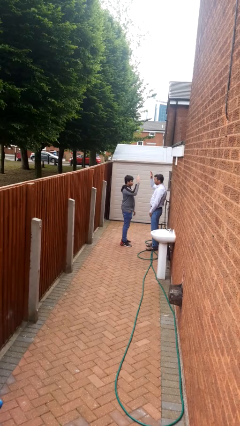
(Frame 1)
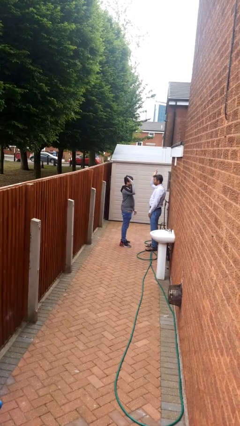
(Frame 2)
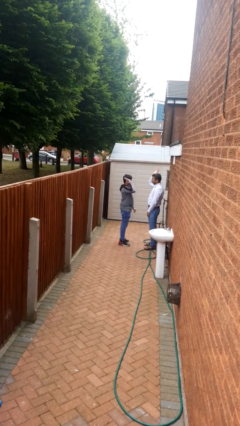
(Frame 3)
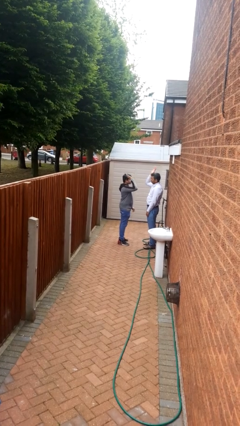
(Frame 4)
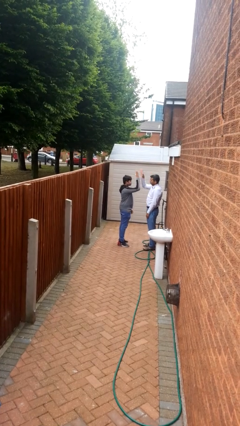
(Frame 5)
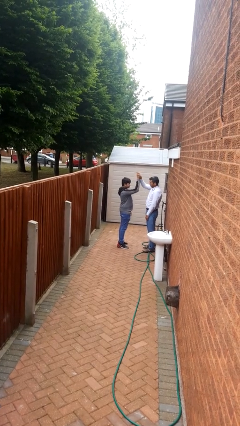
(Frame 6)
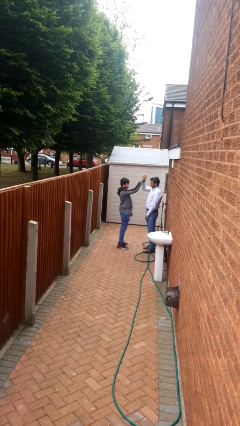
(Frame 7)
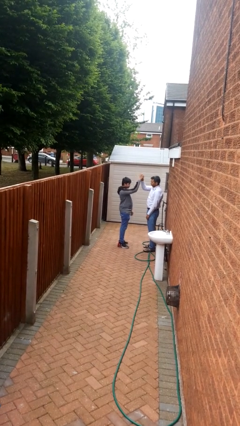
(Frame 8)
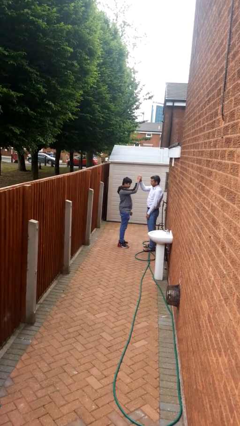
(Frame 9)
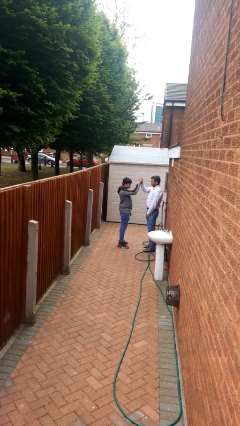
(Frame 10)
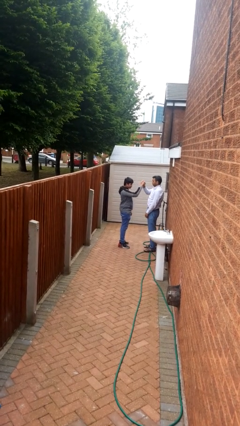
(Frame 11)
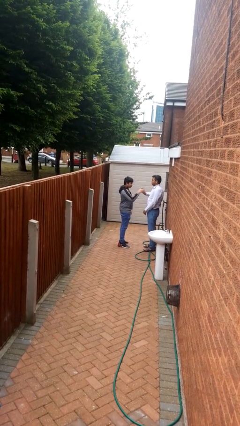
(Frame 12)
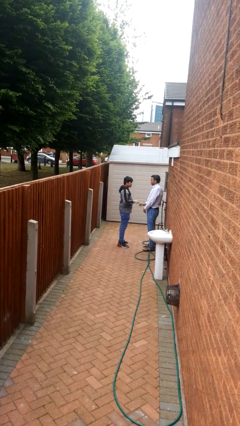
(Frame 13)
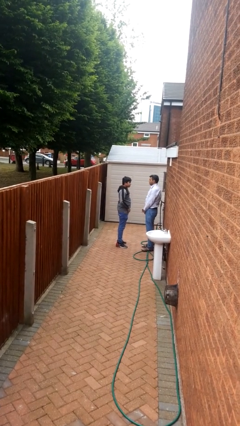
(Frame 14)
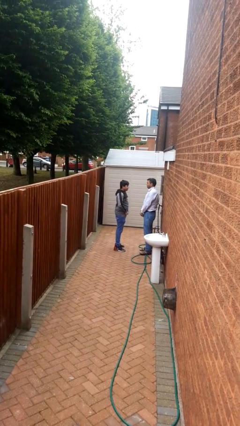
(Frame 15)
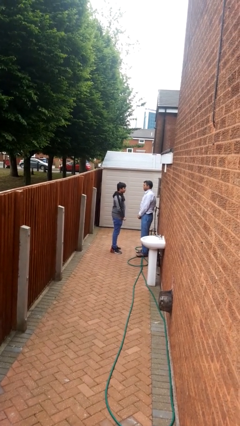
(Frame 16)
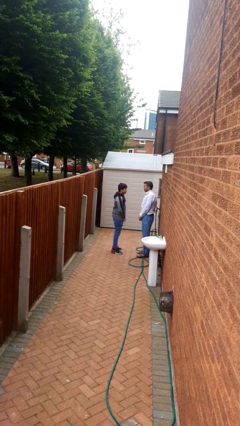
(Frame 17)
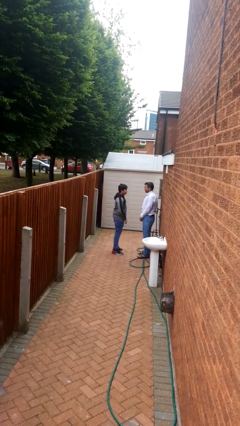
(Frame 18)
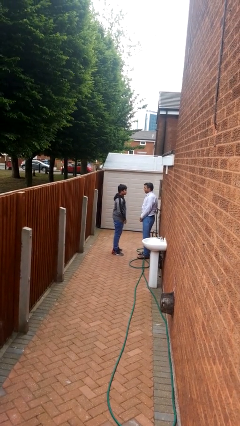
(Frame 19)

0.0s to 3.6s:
person highfives hand

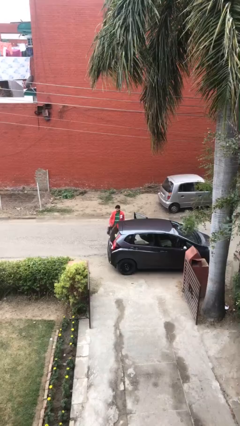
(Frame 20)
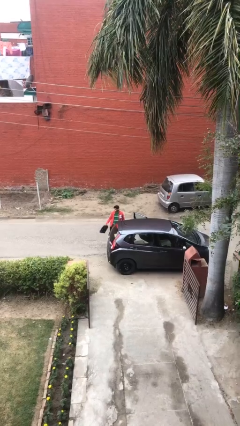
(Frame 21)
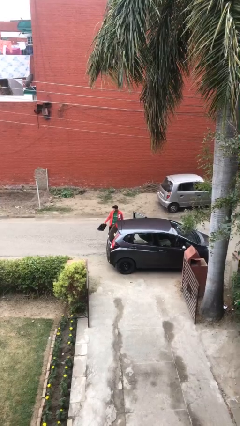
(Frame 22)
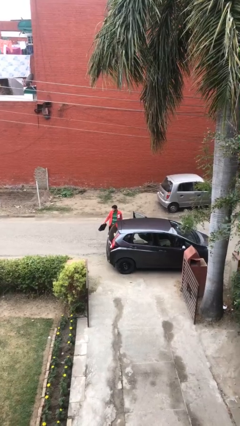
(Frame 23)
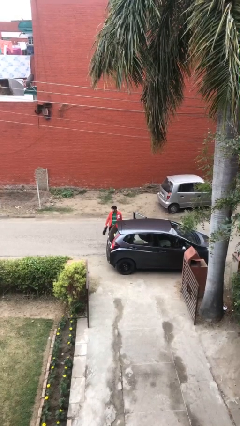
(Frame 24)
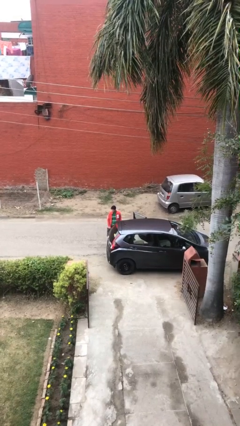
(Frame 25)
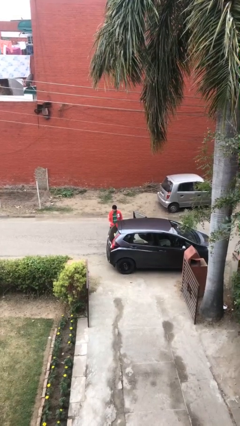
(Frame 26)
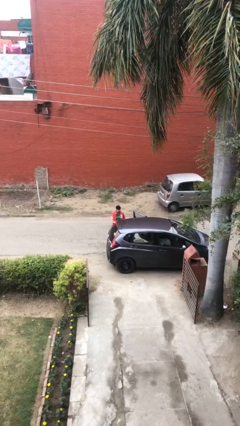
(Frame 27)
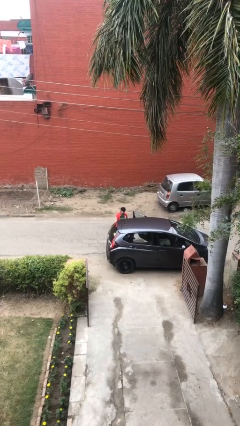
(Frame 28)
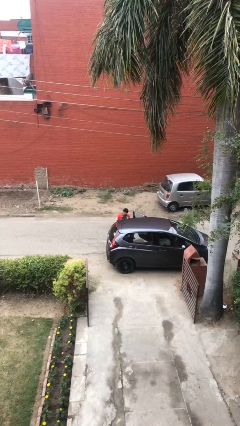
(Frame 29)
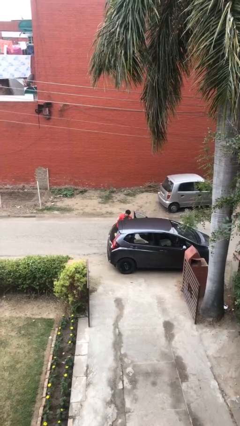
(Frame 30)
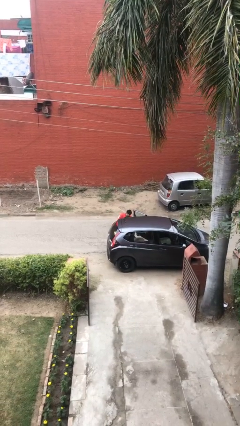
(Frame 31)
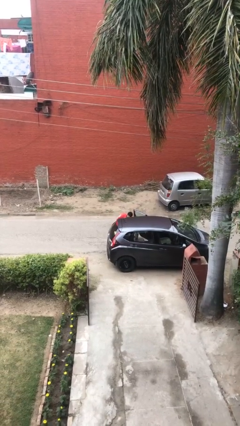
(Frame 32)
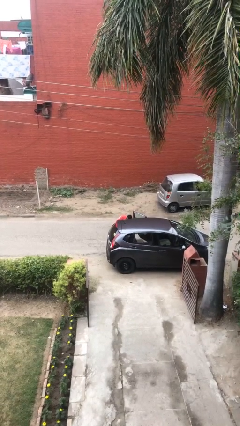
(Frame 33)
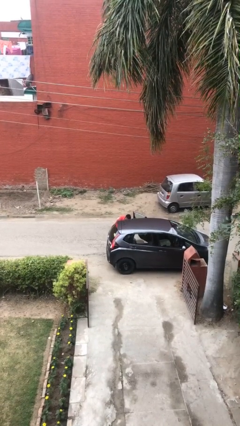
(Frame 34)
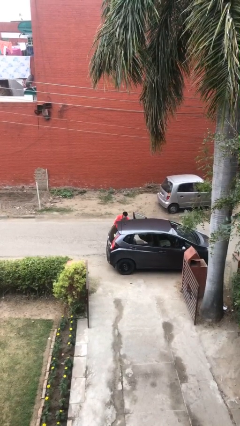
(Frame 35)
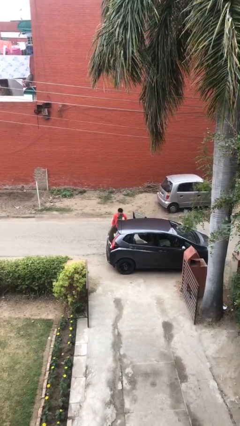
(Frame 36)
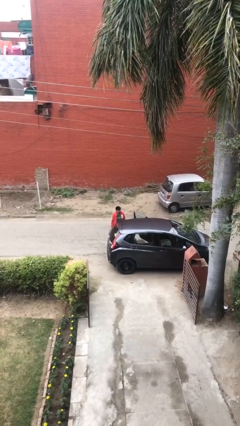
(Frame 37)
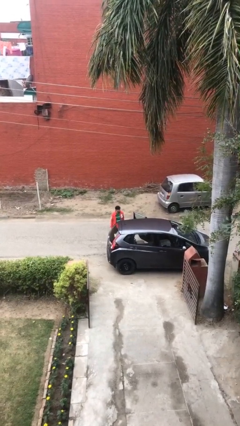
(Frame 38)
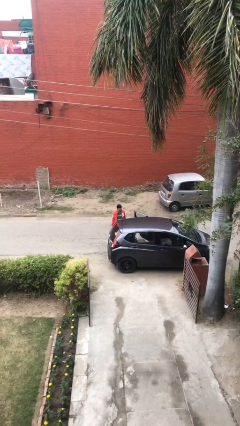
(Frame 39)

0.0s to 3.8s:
person loads car

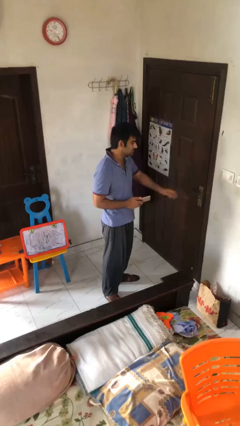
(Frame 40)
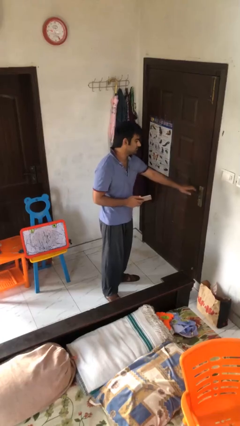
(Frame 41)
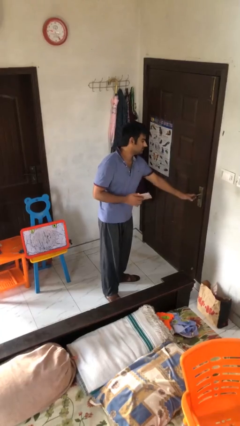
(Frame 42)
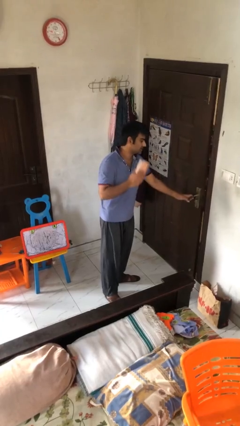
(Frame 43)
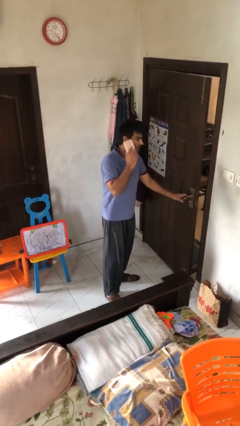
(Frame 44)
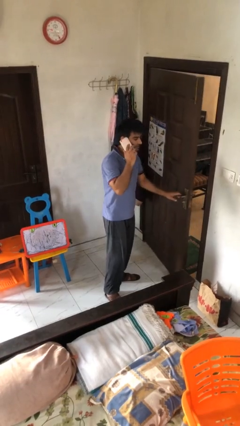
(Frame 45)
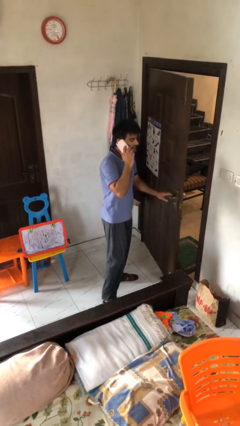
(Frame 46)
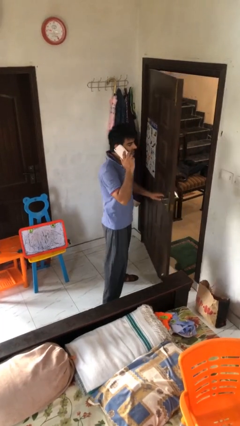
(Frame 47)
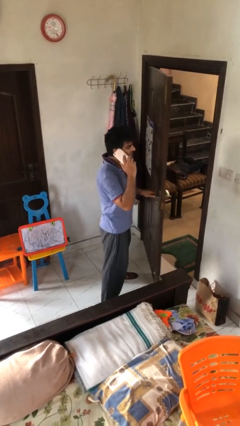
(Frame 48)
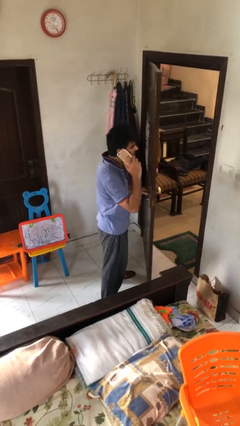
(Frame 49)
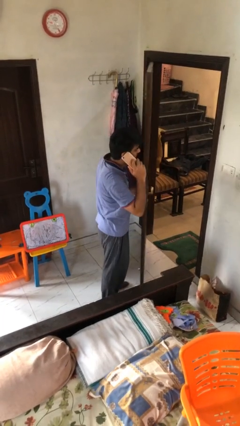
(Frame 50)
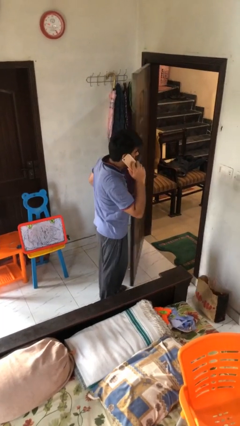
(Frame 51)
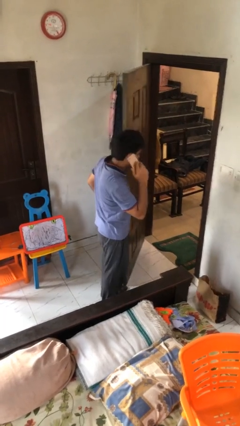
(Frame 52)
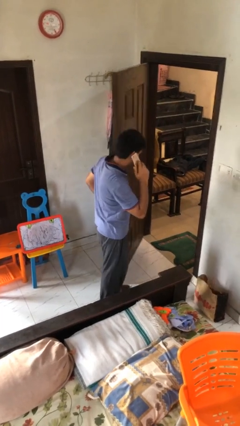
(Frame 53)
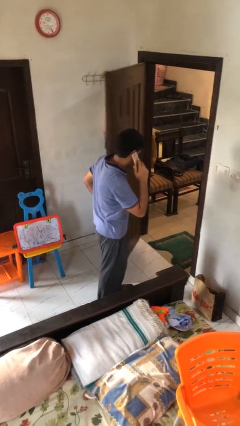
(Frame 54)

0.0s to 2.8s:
person opens facility door

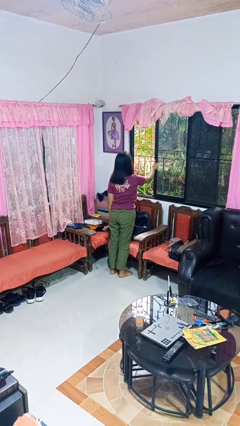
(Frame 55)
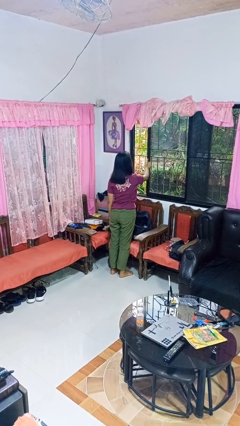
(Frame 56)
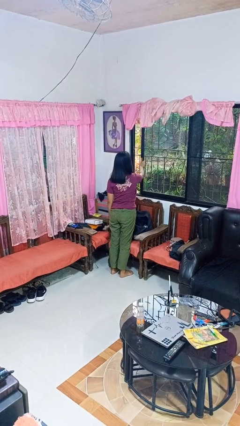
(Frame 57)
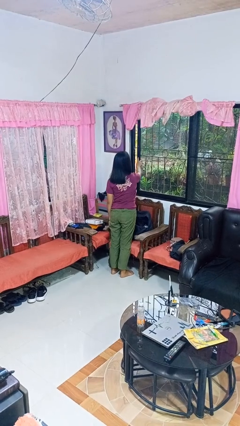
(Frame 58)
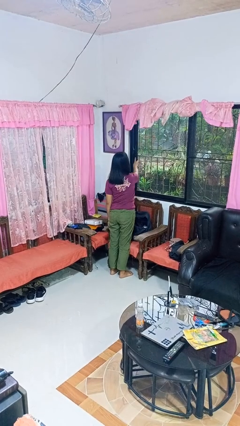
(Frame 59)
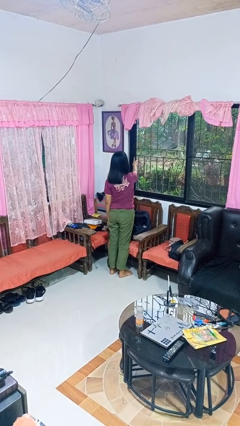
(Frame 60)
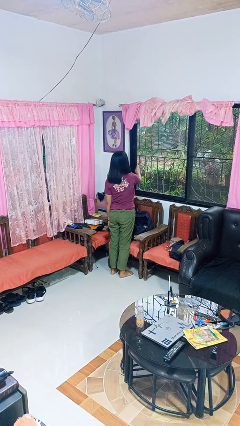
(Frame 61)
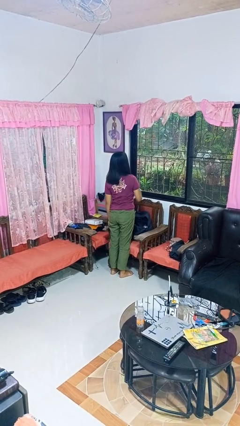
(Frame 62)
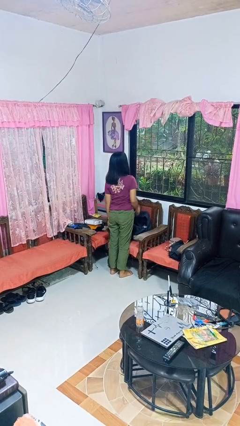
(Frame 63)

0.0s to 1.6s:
person closes home window

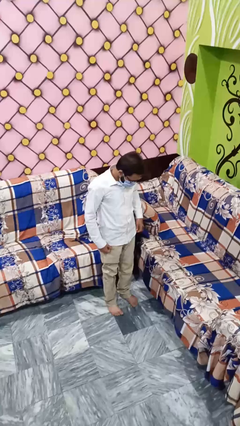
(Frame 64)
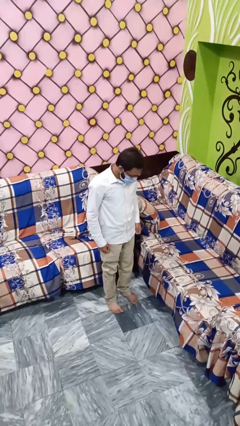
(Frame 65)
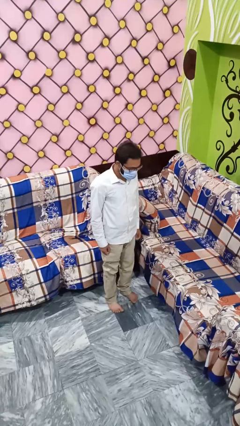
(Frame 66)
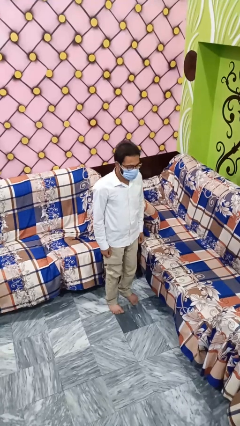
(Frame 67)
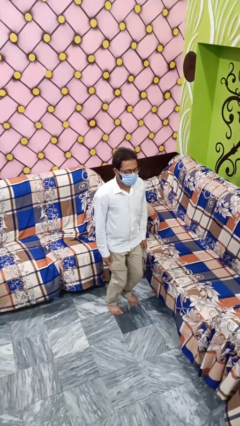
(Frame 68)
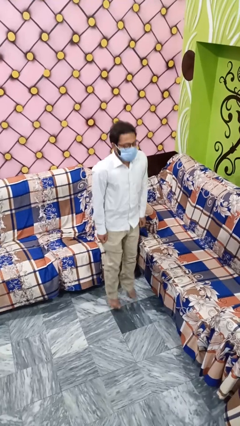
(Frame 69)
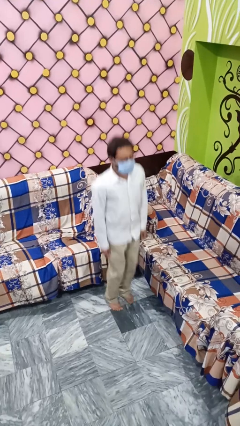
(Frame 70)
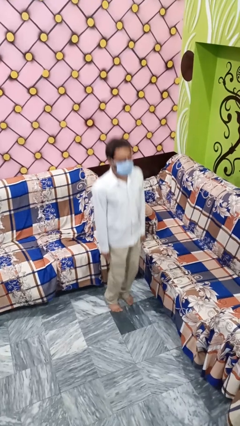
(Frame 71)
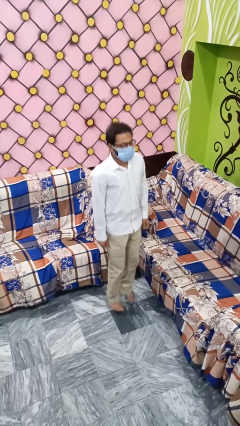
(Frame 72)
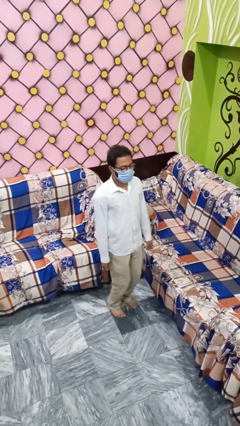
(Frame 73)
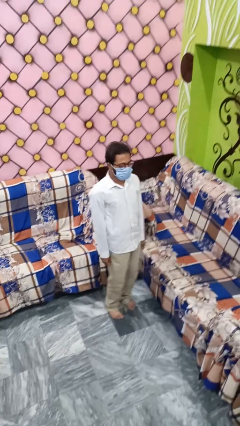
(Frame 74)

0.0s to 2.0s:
person jumps

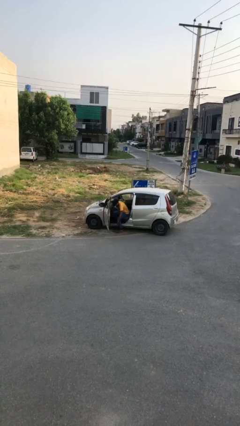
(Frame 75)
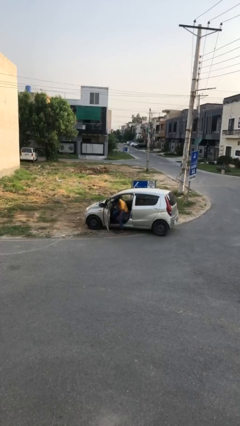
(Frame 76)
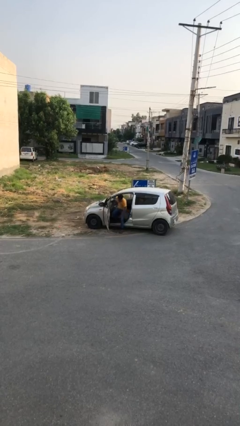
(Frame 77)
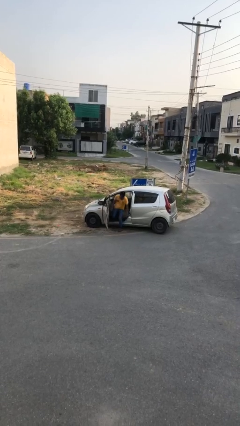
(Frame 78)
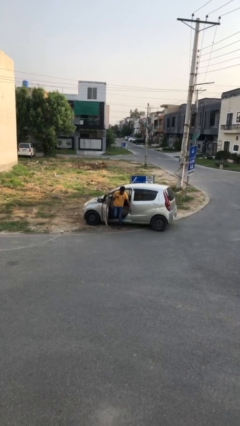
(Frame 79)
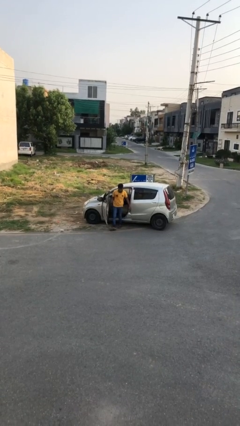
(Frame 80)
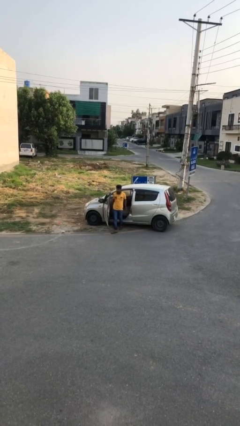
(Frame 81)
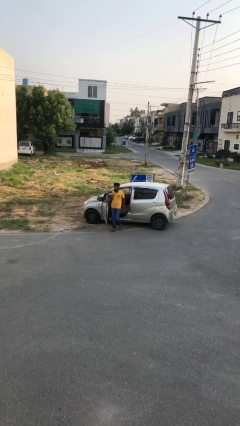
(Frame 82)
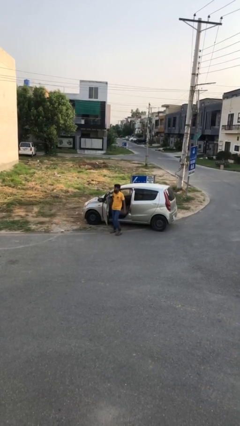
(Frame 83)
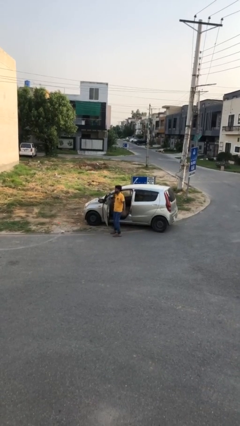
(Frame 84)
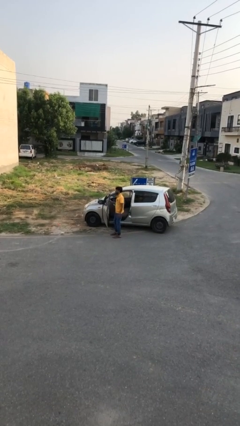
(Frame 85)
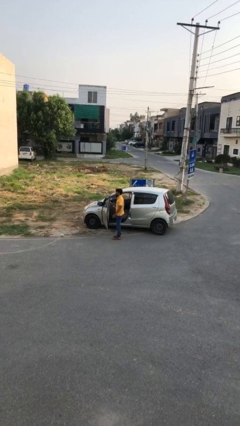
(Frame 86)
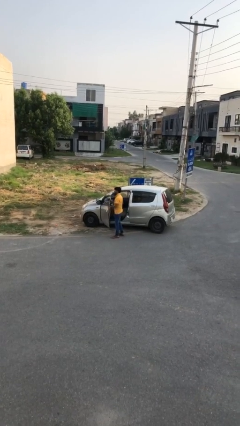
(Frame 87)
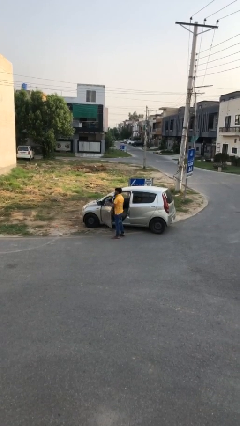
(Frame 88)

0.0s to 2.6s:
person exits car

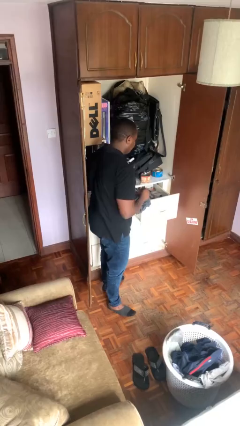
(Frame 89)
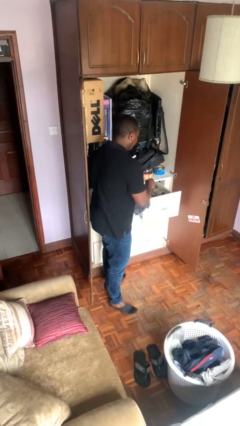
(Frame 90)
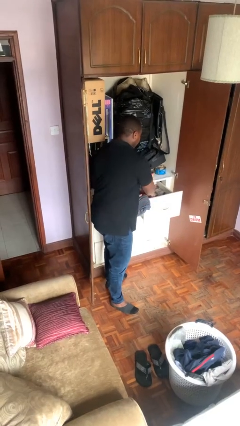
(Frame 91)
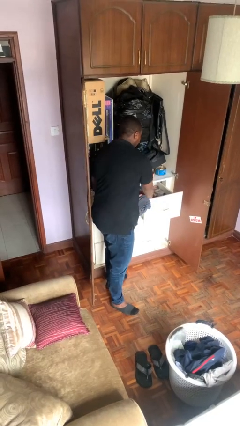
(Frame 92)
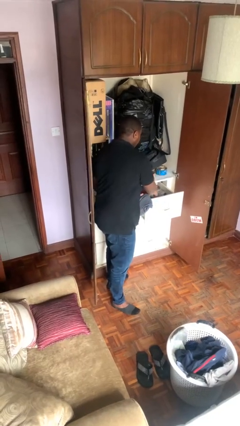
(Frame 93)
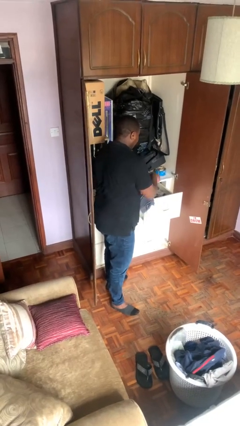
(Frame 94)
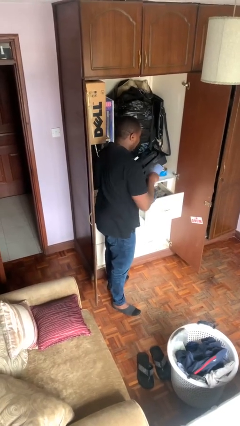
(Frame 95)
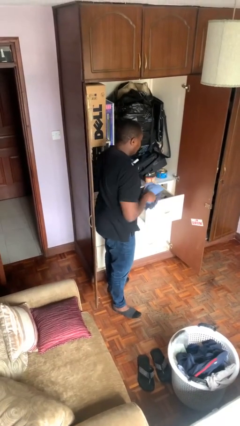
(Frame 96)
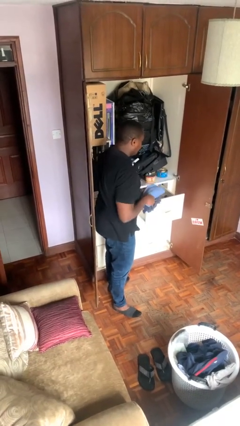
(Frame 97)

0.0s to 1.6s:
person takes clothes from dresser
